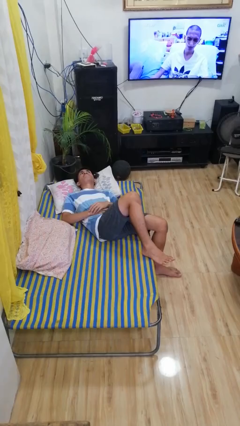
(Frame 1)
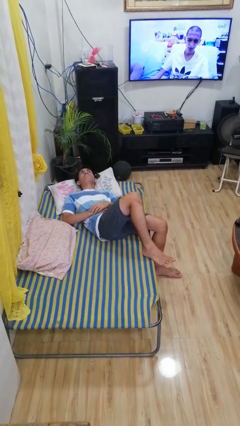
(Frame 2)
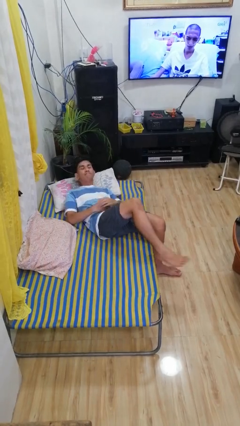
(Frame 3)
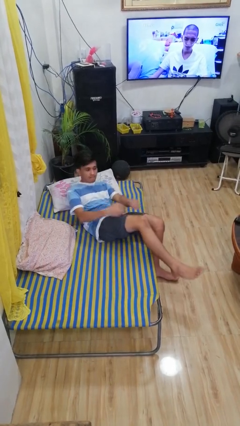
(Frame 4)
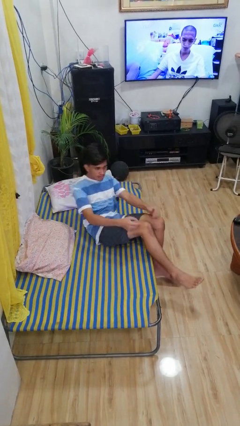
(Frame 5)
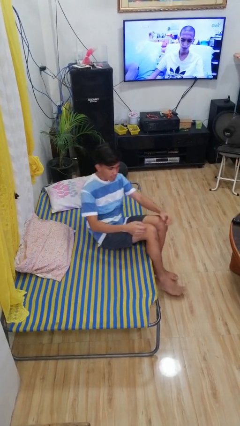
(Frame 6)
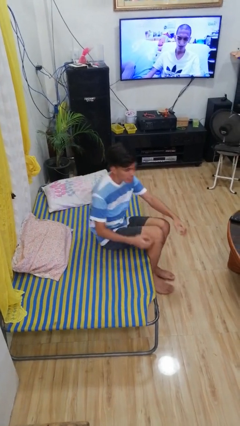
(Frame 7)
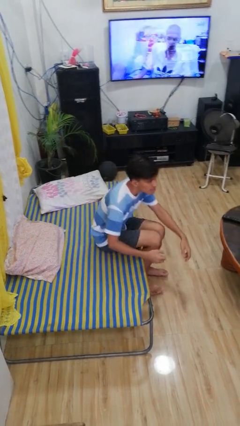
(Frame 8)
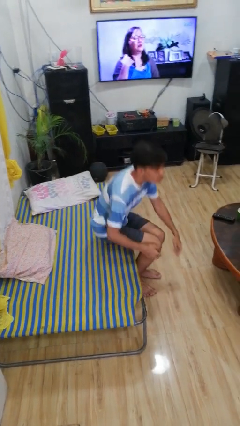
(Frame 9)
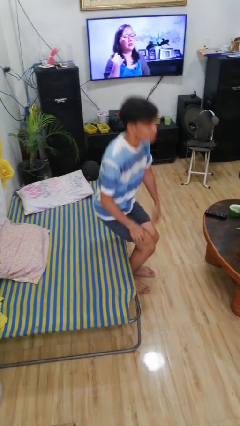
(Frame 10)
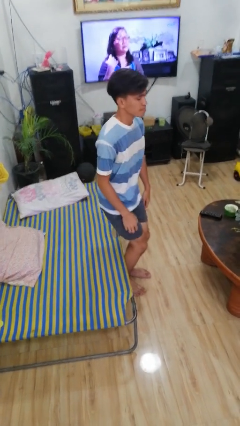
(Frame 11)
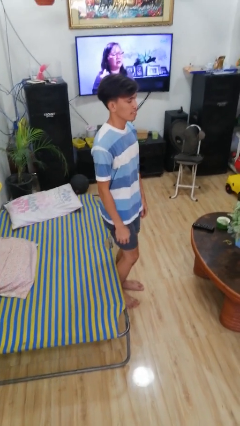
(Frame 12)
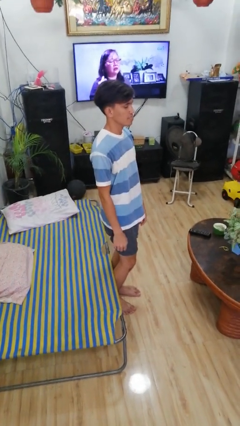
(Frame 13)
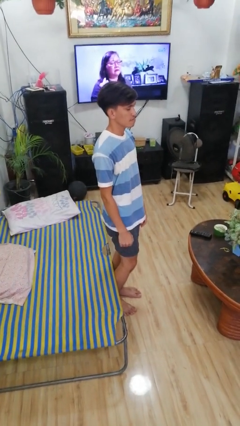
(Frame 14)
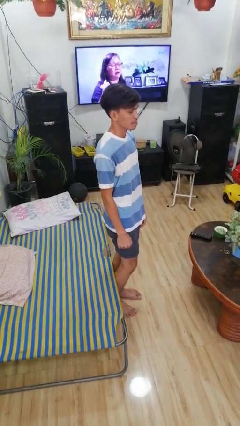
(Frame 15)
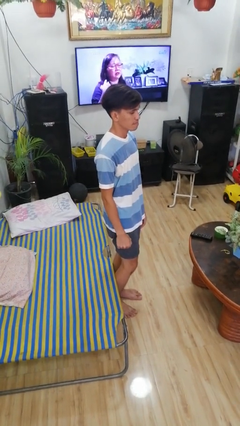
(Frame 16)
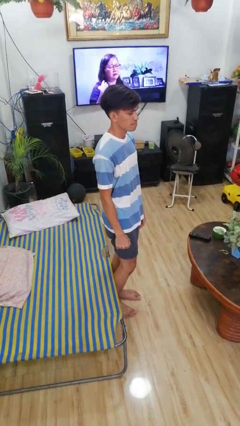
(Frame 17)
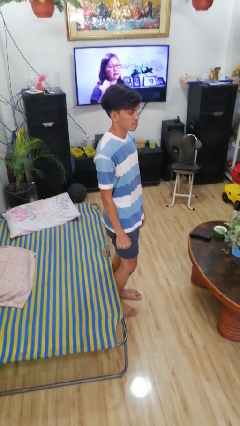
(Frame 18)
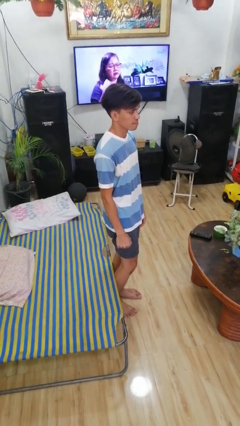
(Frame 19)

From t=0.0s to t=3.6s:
person stands up

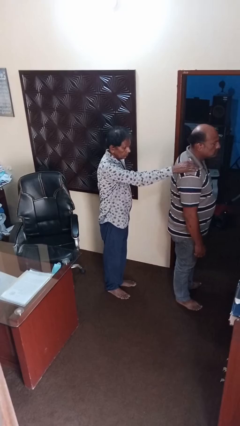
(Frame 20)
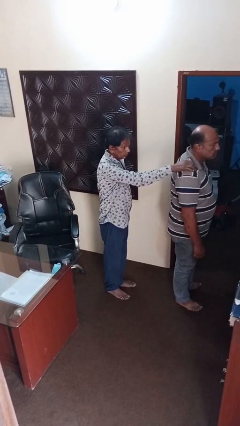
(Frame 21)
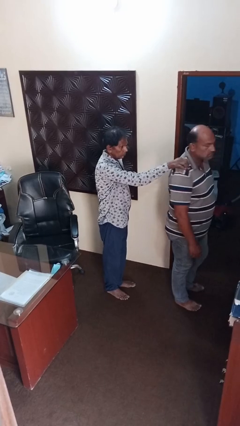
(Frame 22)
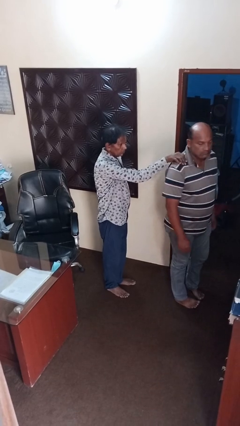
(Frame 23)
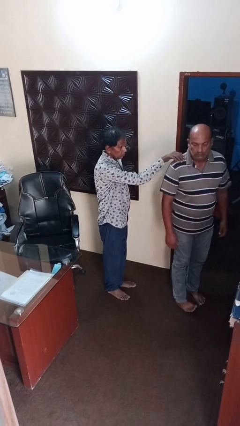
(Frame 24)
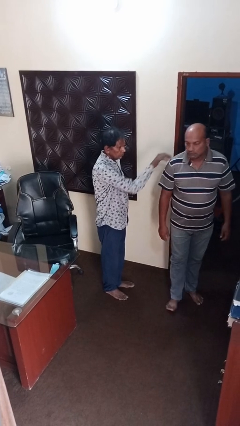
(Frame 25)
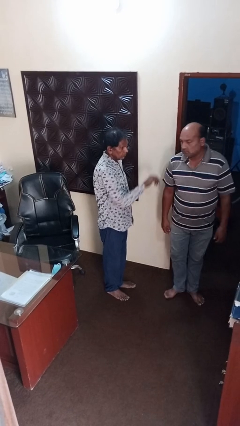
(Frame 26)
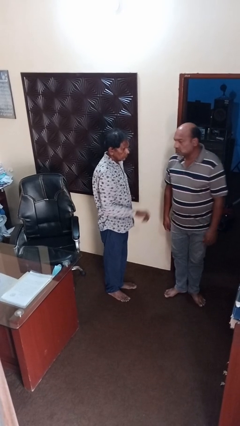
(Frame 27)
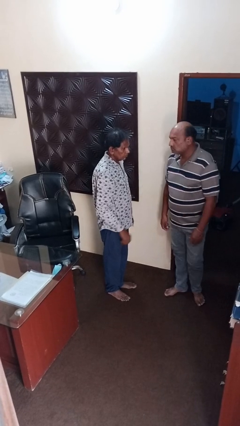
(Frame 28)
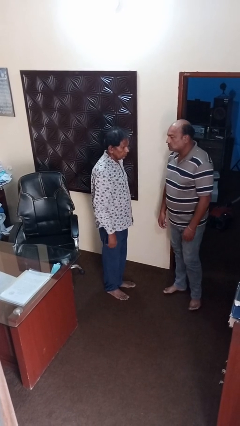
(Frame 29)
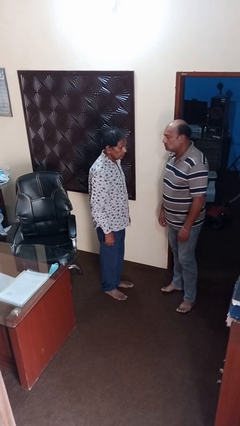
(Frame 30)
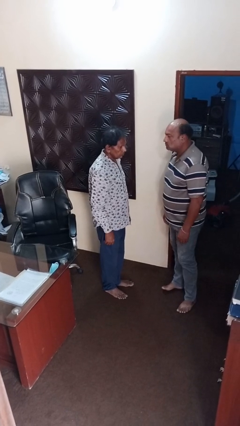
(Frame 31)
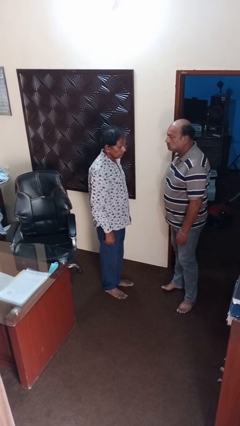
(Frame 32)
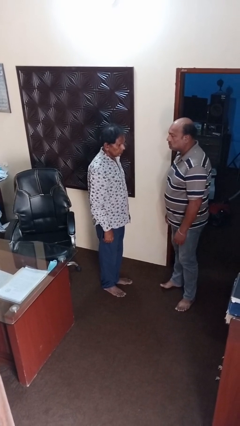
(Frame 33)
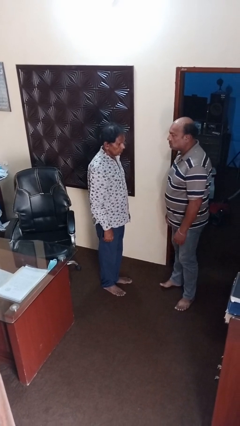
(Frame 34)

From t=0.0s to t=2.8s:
person spins person around

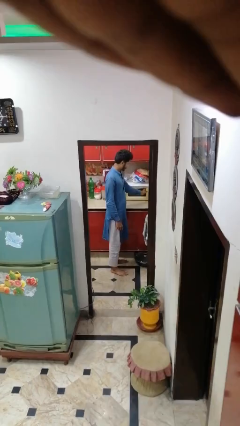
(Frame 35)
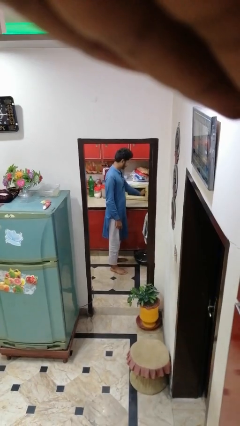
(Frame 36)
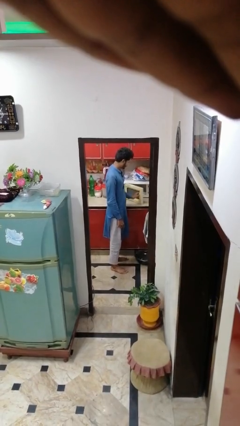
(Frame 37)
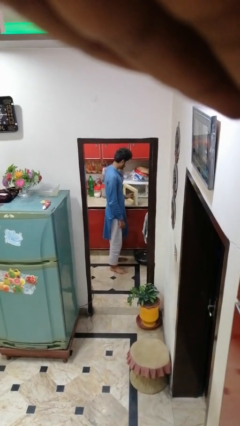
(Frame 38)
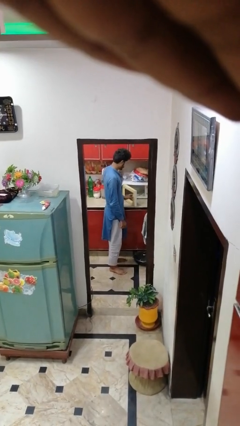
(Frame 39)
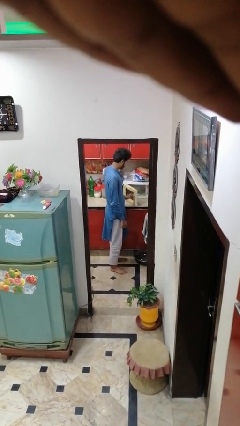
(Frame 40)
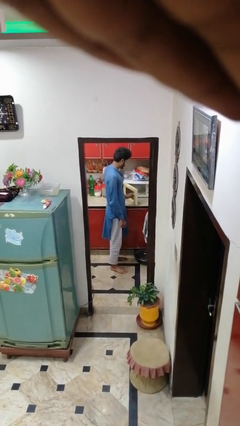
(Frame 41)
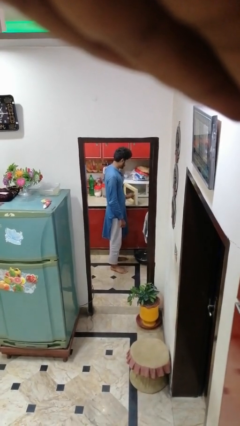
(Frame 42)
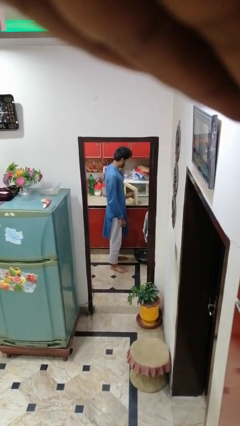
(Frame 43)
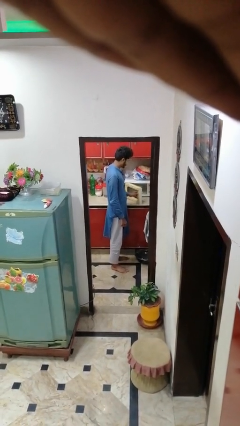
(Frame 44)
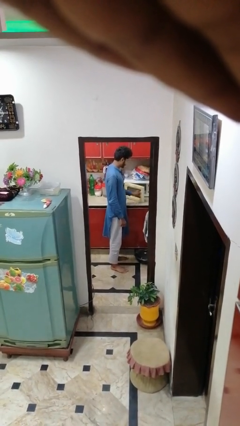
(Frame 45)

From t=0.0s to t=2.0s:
person opens microwave

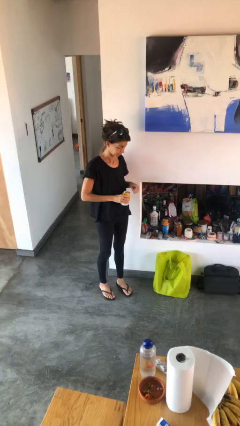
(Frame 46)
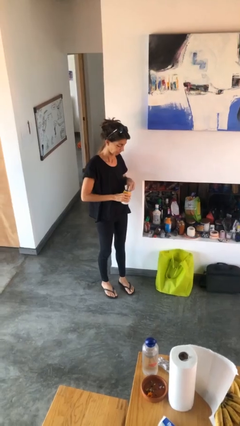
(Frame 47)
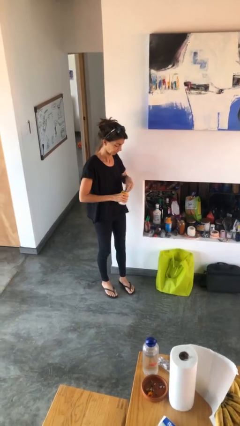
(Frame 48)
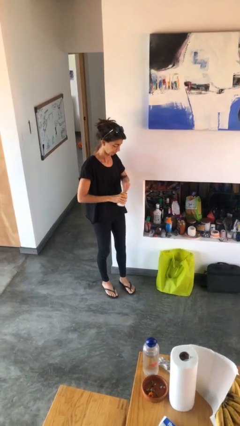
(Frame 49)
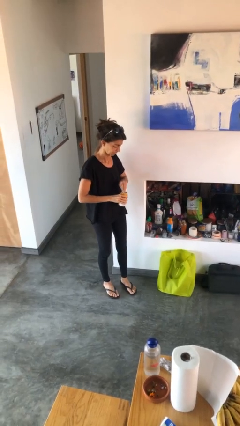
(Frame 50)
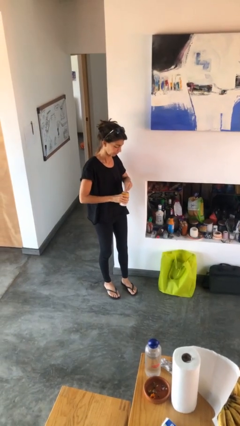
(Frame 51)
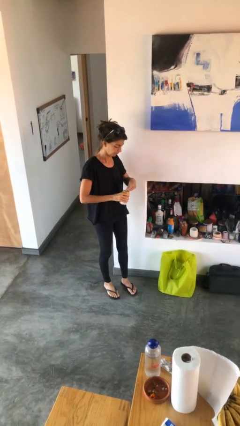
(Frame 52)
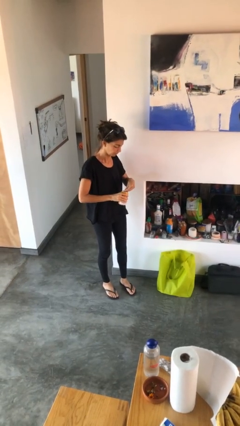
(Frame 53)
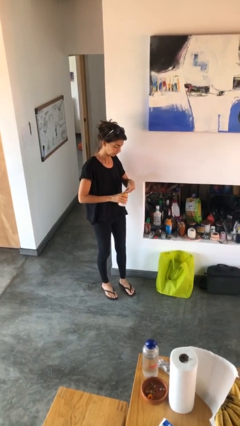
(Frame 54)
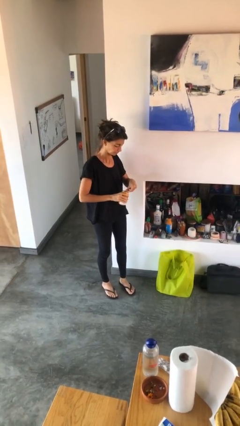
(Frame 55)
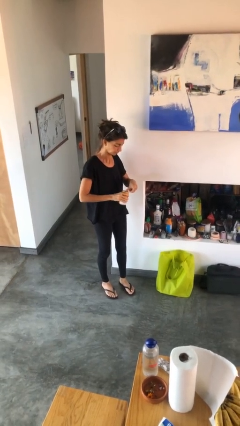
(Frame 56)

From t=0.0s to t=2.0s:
person opens beverage can

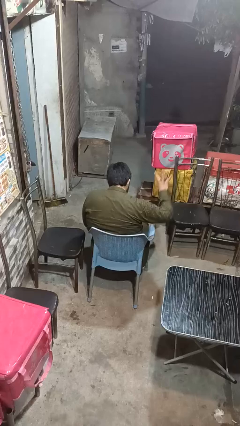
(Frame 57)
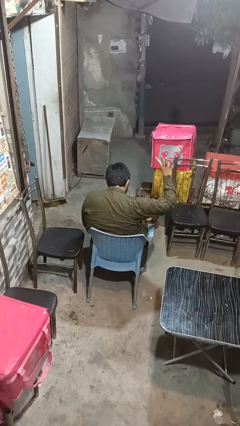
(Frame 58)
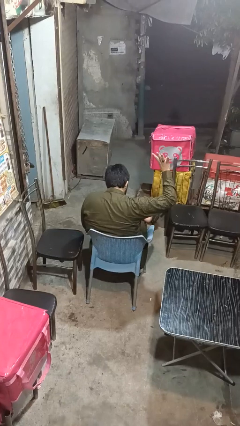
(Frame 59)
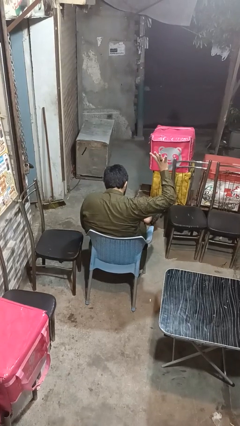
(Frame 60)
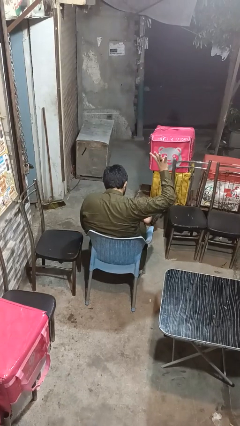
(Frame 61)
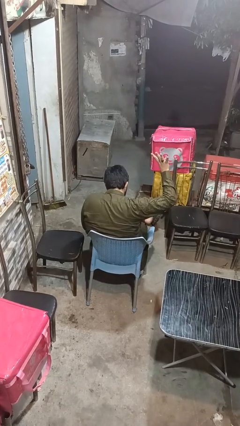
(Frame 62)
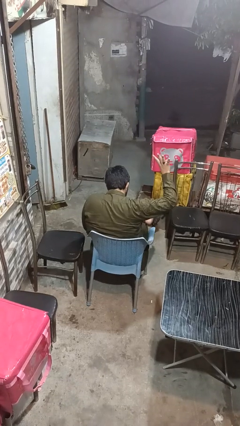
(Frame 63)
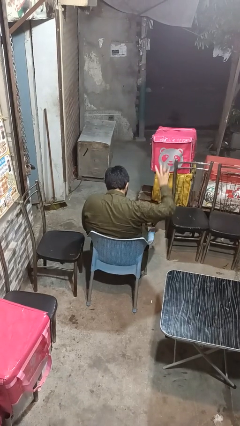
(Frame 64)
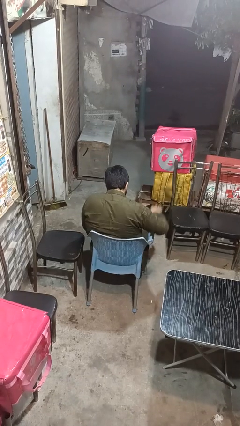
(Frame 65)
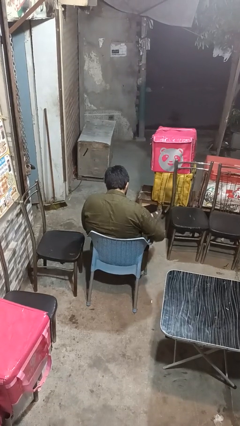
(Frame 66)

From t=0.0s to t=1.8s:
person gestures number four

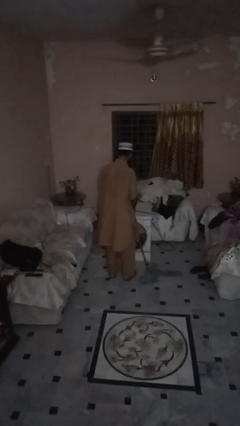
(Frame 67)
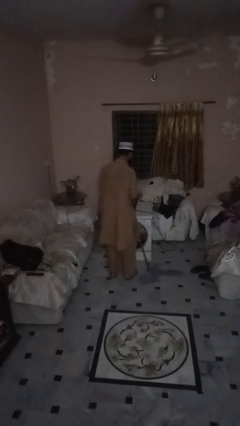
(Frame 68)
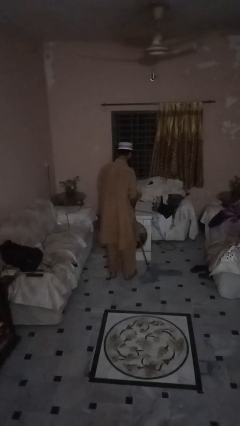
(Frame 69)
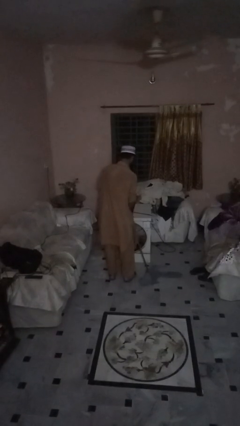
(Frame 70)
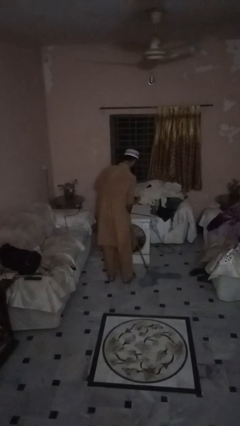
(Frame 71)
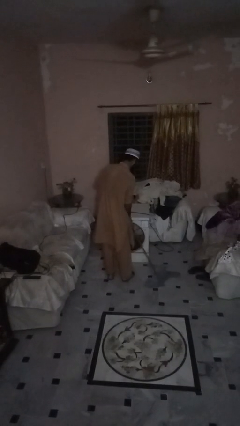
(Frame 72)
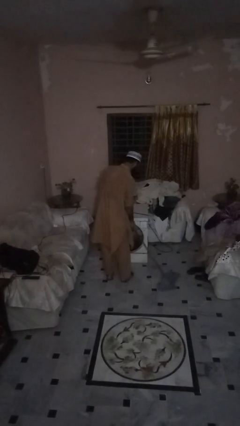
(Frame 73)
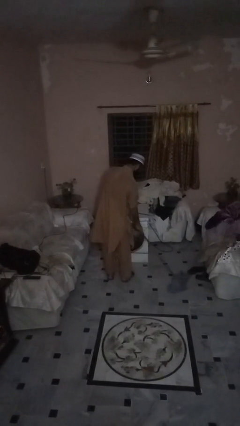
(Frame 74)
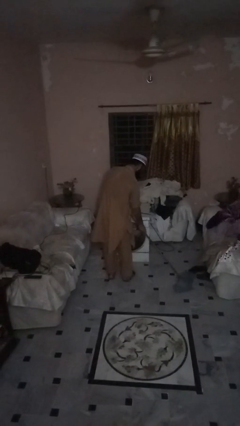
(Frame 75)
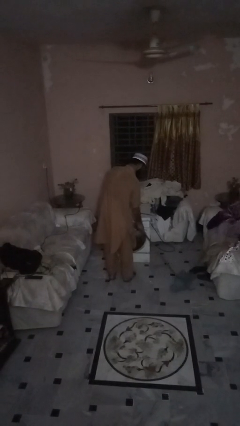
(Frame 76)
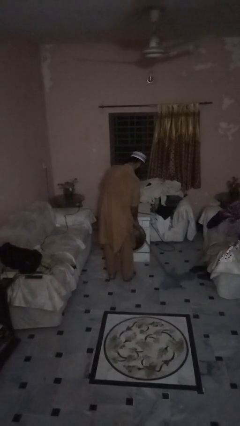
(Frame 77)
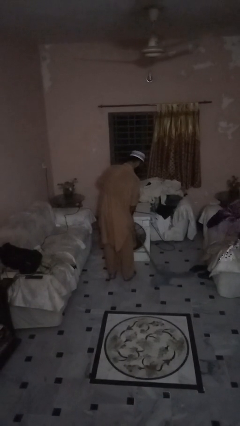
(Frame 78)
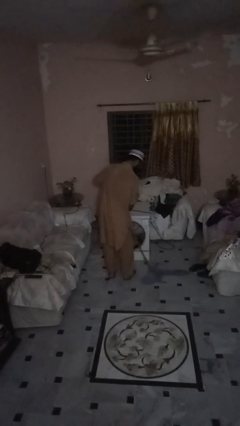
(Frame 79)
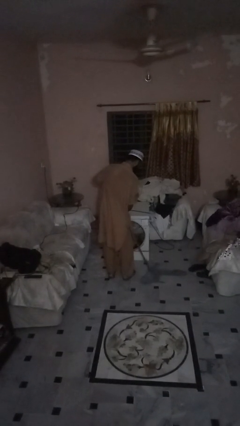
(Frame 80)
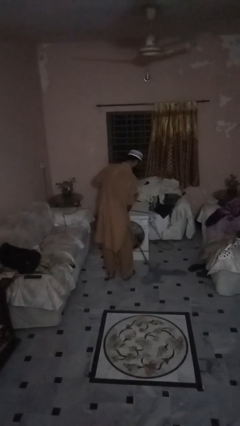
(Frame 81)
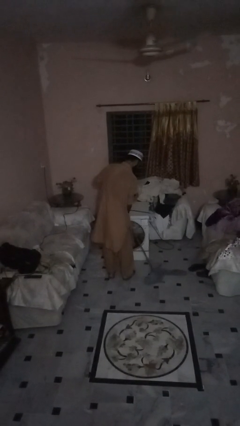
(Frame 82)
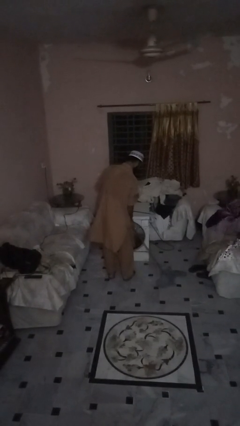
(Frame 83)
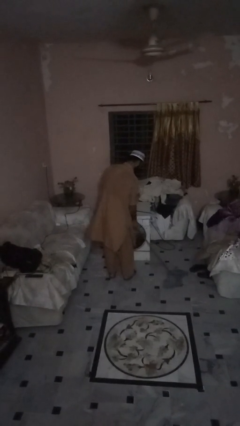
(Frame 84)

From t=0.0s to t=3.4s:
person mops

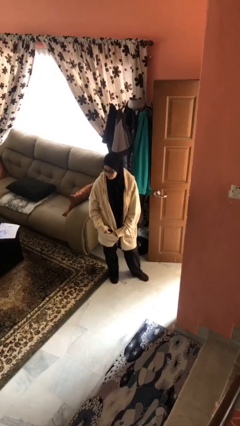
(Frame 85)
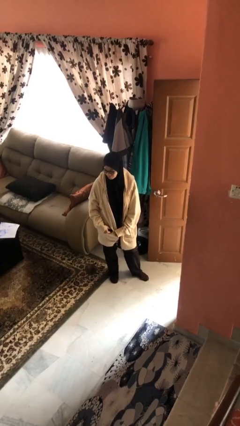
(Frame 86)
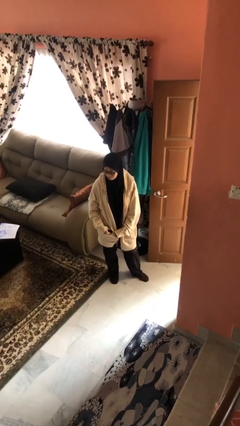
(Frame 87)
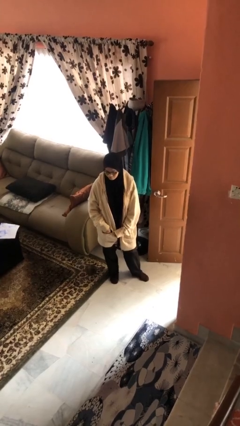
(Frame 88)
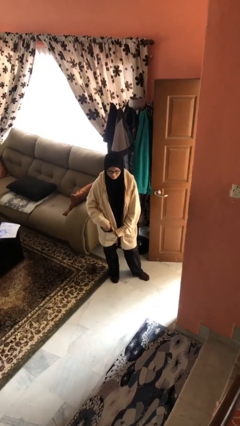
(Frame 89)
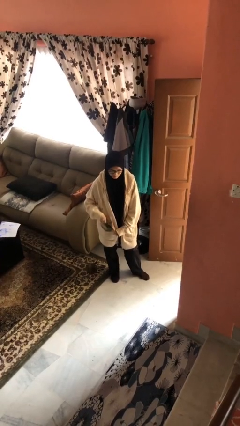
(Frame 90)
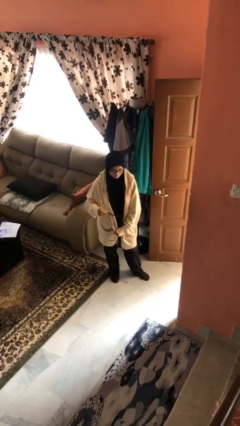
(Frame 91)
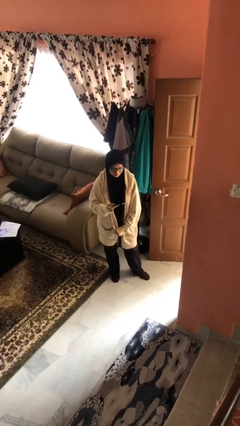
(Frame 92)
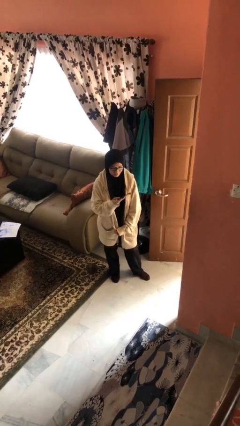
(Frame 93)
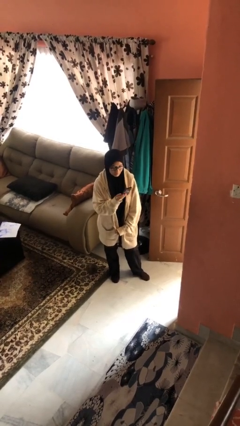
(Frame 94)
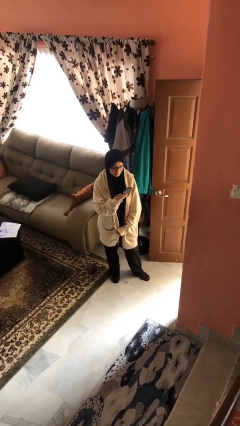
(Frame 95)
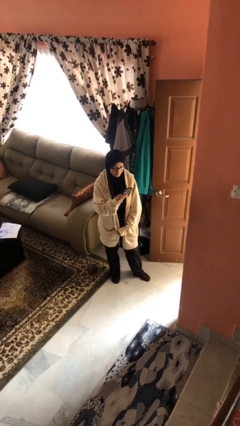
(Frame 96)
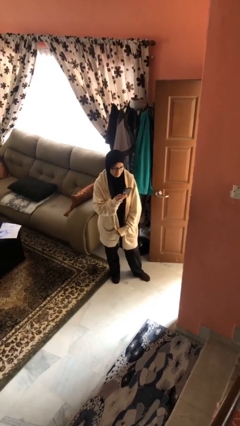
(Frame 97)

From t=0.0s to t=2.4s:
person takes phone from pocket
